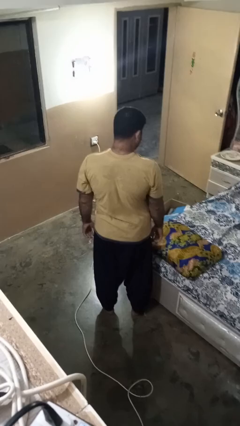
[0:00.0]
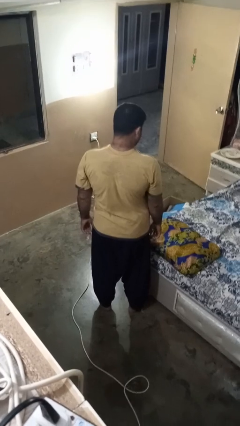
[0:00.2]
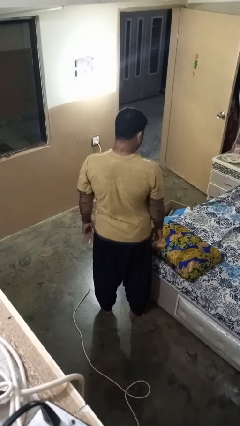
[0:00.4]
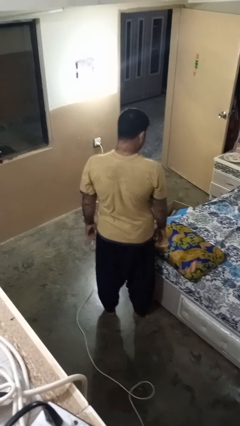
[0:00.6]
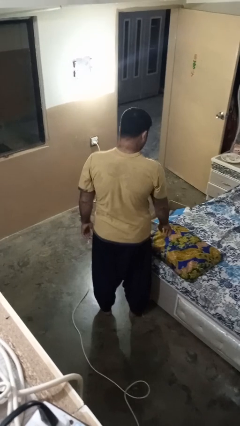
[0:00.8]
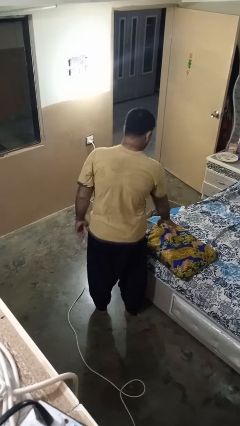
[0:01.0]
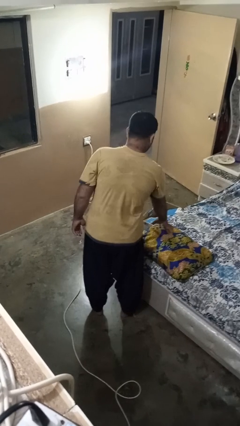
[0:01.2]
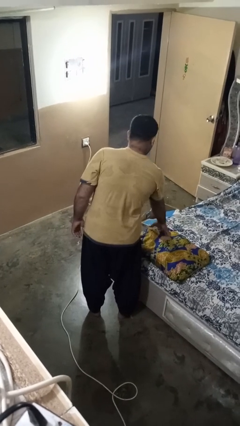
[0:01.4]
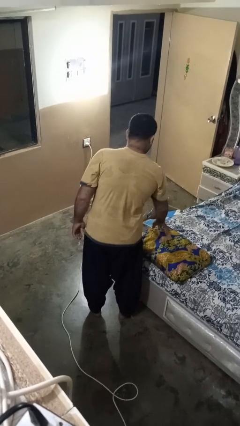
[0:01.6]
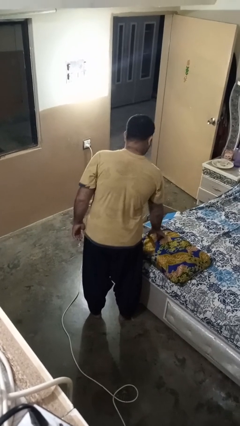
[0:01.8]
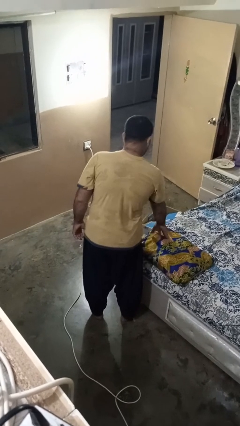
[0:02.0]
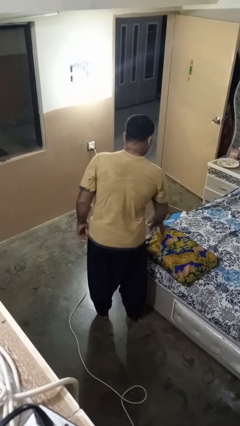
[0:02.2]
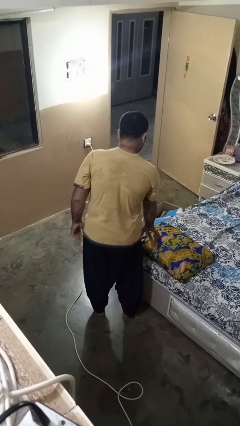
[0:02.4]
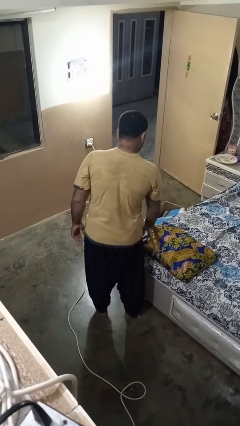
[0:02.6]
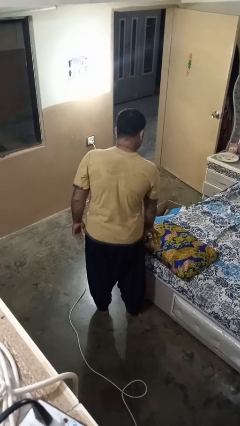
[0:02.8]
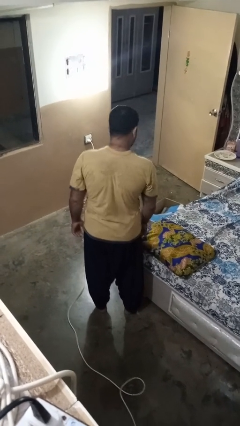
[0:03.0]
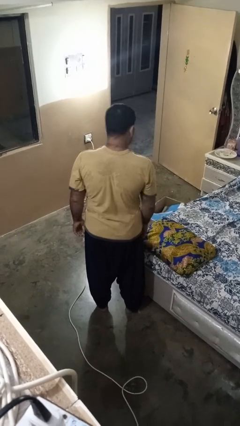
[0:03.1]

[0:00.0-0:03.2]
person taps object with finger

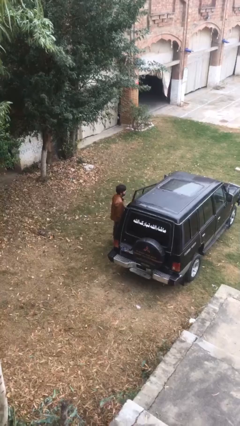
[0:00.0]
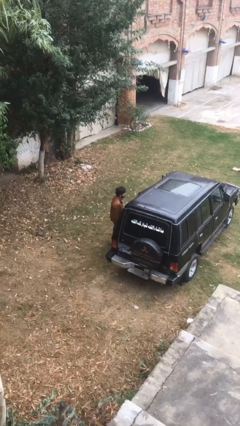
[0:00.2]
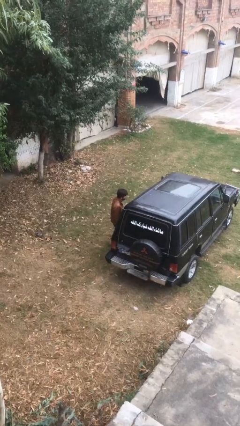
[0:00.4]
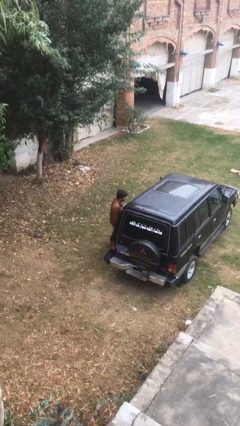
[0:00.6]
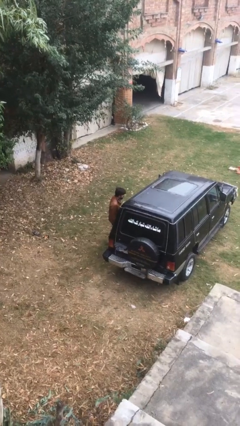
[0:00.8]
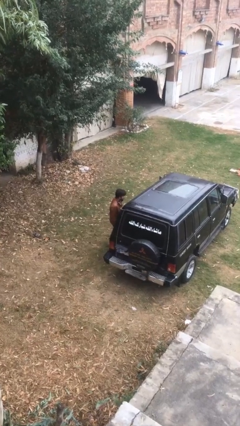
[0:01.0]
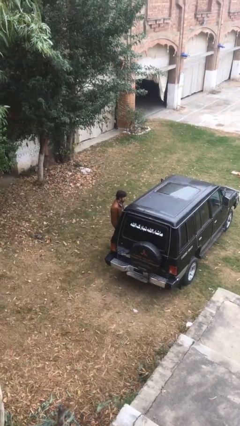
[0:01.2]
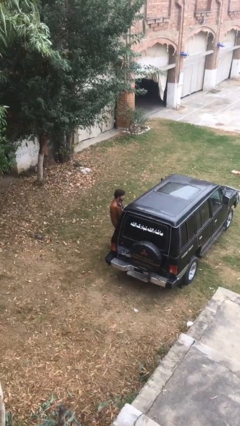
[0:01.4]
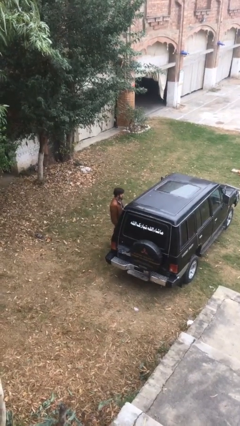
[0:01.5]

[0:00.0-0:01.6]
person closes car door

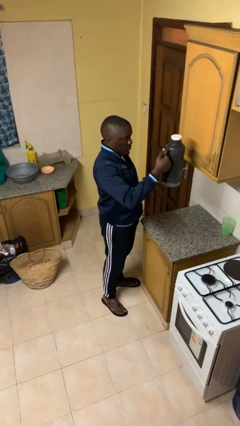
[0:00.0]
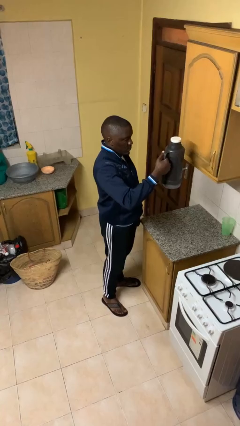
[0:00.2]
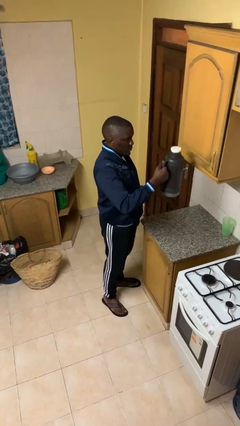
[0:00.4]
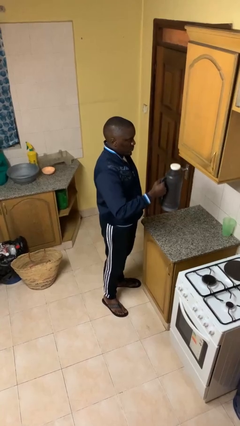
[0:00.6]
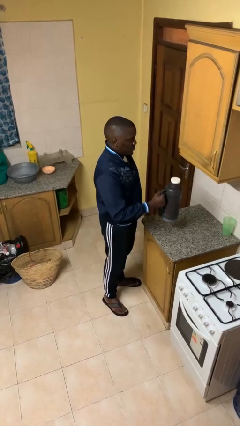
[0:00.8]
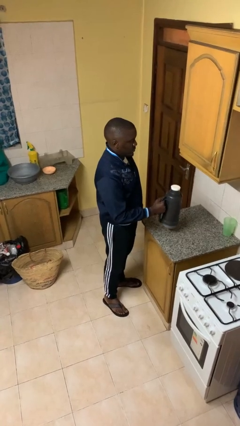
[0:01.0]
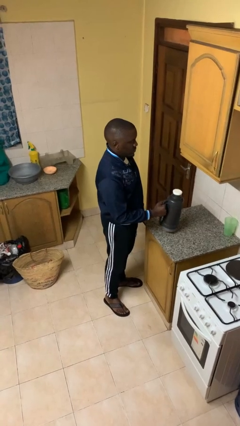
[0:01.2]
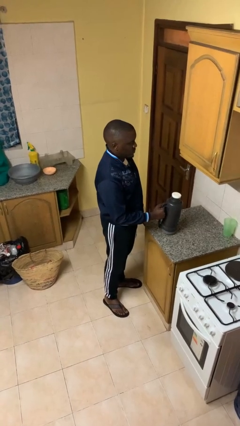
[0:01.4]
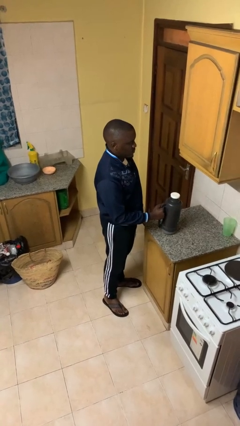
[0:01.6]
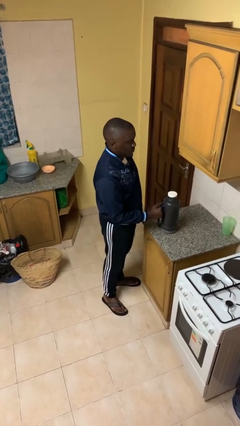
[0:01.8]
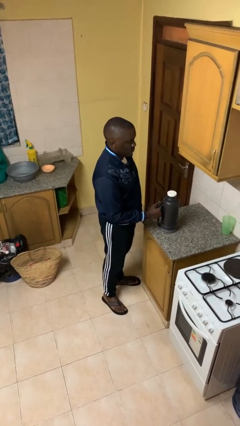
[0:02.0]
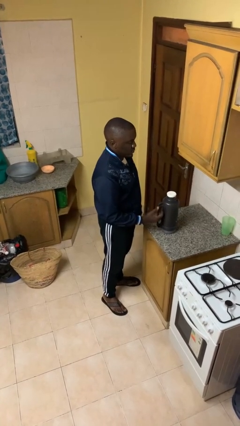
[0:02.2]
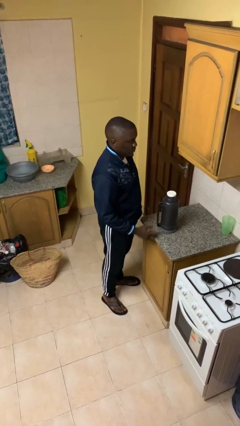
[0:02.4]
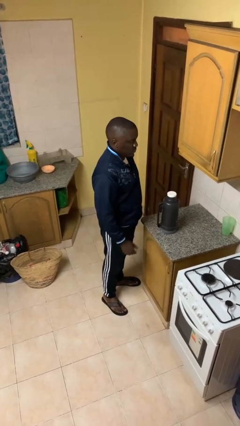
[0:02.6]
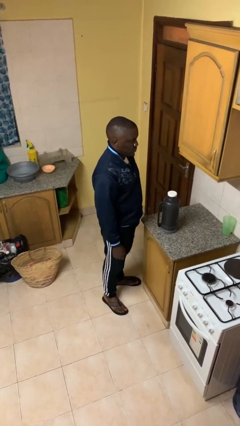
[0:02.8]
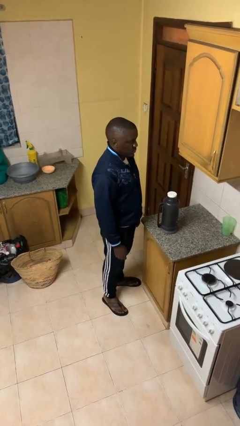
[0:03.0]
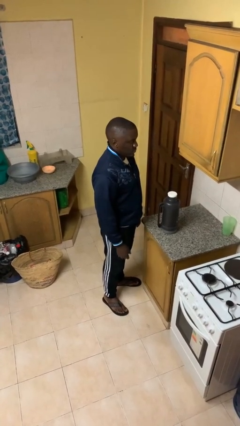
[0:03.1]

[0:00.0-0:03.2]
person puts down object on countertop

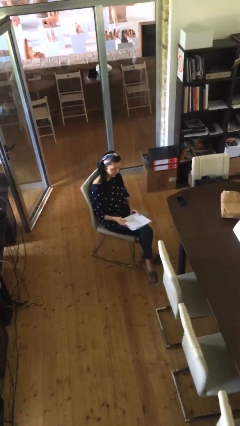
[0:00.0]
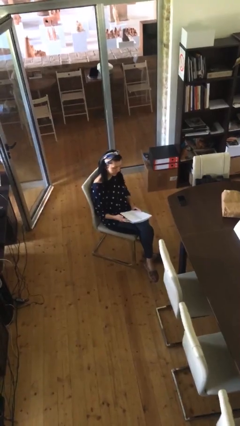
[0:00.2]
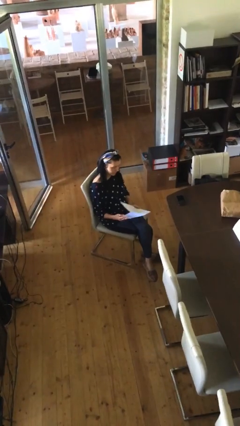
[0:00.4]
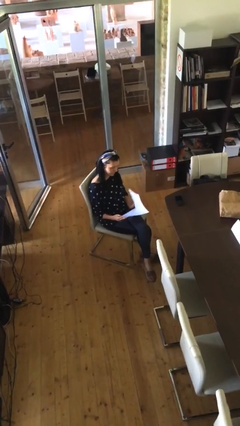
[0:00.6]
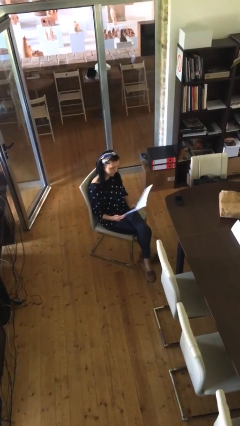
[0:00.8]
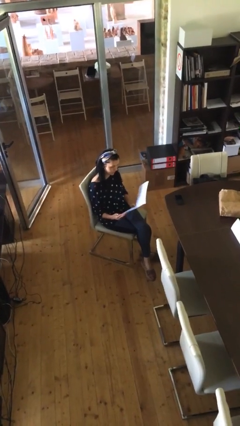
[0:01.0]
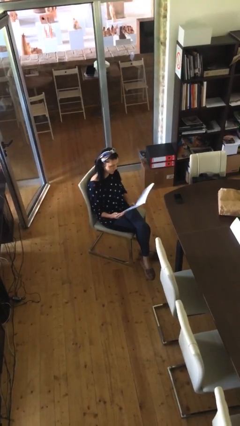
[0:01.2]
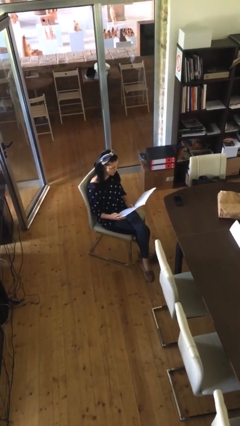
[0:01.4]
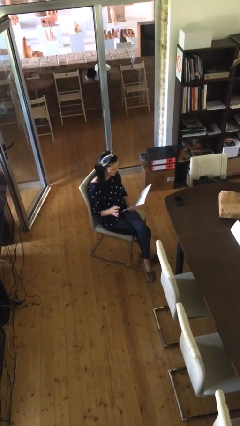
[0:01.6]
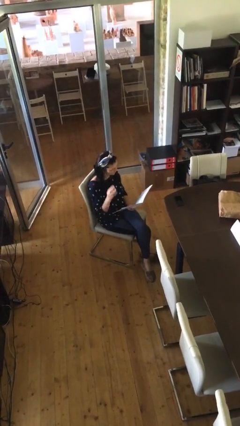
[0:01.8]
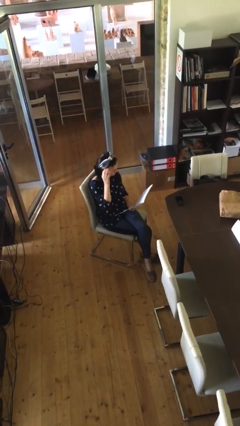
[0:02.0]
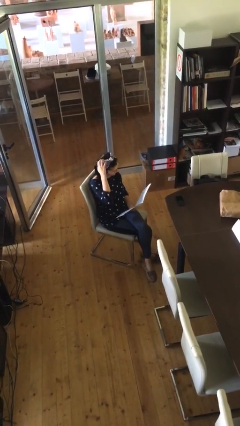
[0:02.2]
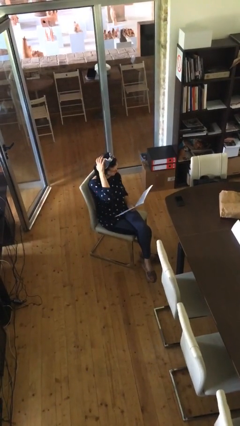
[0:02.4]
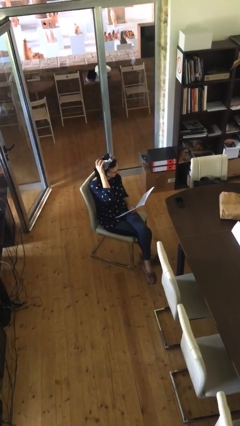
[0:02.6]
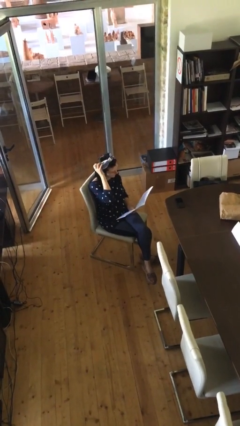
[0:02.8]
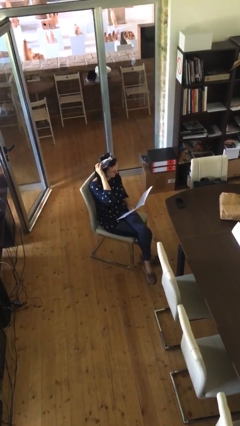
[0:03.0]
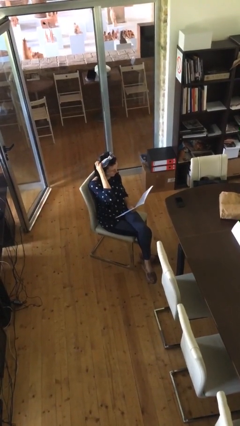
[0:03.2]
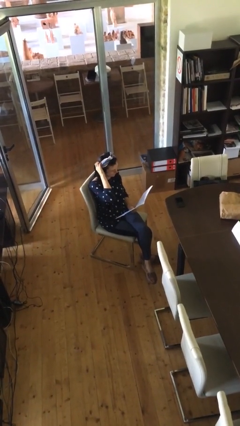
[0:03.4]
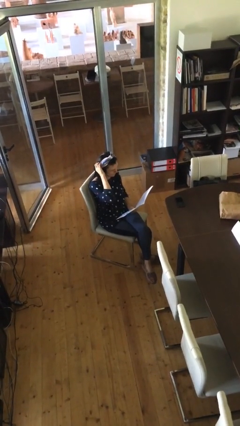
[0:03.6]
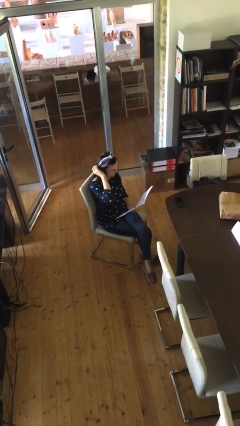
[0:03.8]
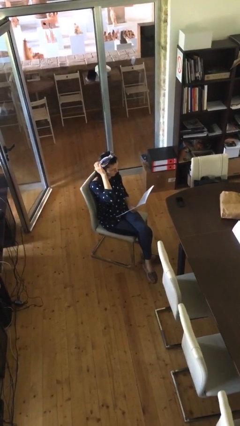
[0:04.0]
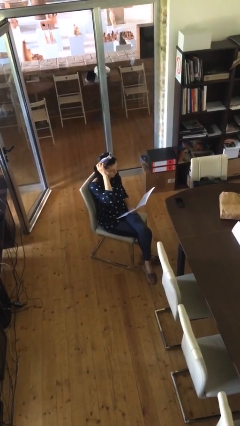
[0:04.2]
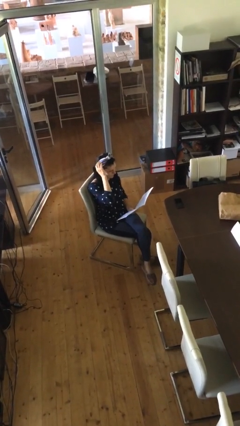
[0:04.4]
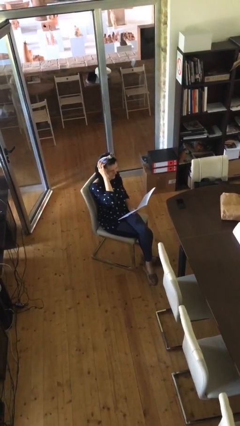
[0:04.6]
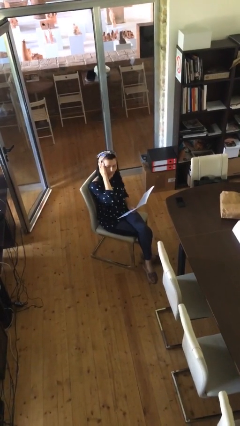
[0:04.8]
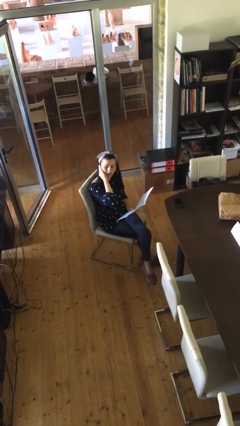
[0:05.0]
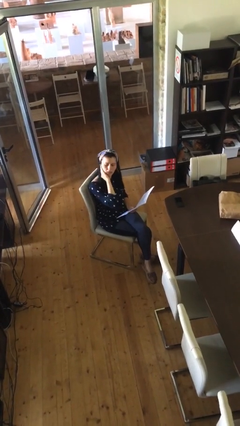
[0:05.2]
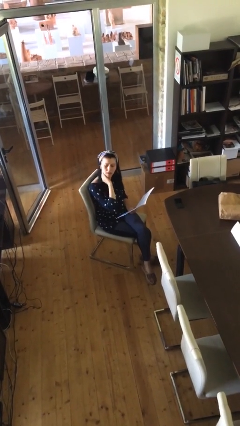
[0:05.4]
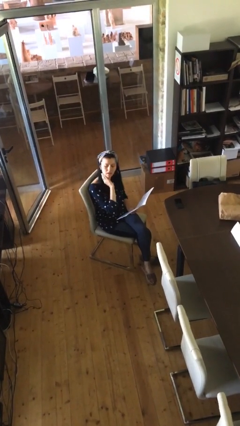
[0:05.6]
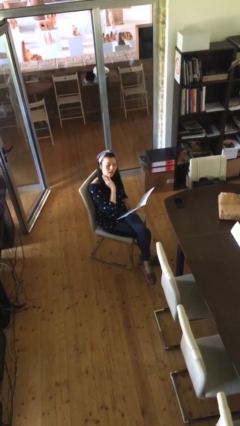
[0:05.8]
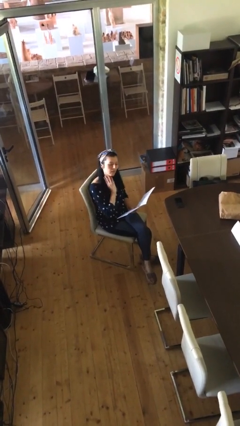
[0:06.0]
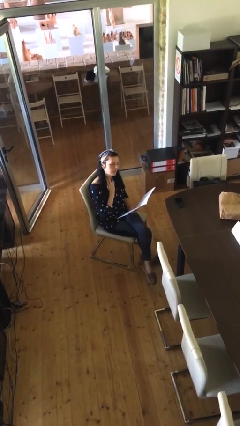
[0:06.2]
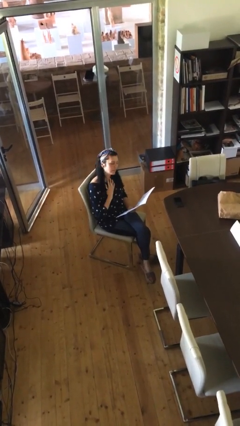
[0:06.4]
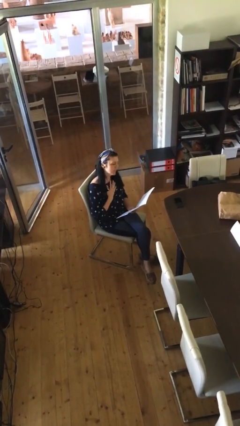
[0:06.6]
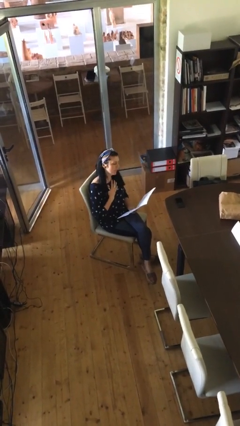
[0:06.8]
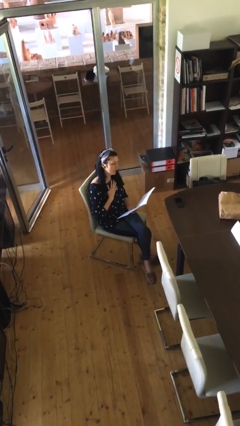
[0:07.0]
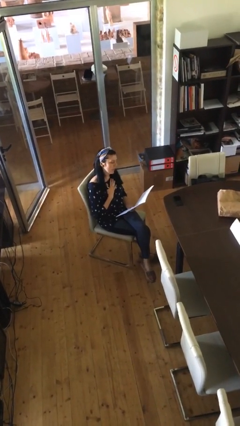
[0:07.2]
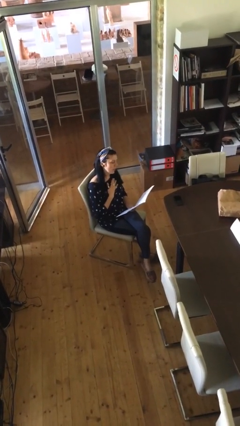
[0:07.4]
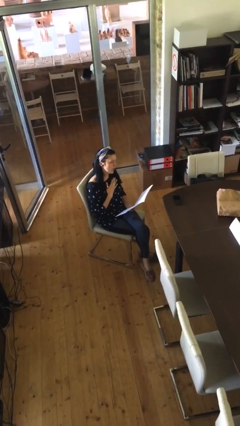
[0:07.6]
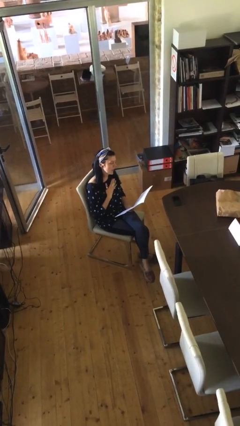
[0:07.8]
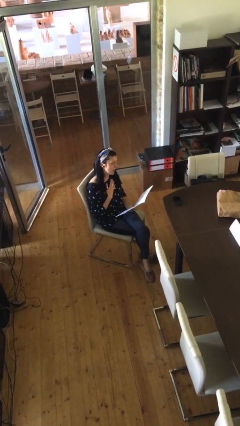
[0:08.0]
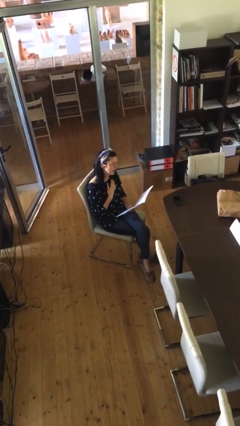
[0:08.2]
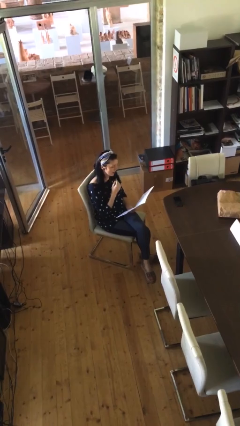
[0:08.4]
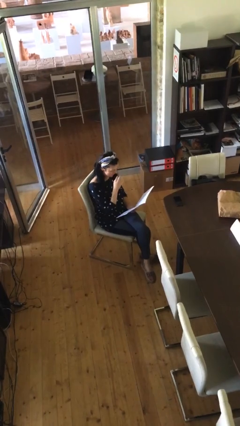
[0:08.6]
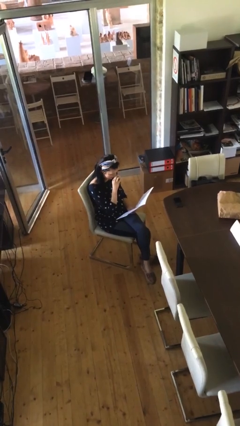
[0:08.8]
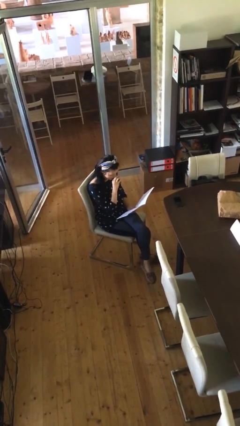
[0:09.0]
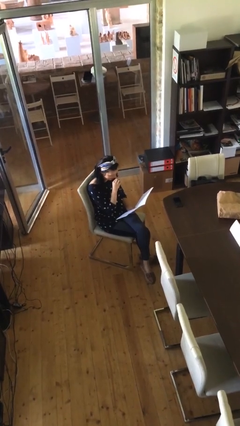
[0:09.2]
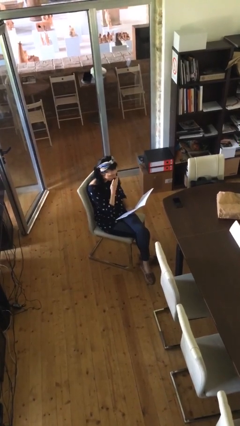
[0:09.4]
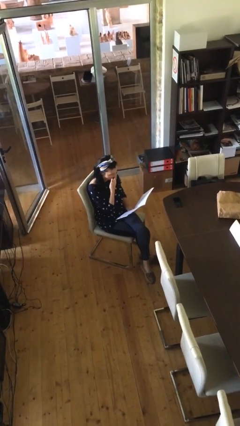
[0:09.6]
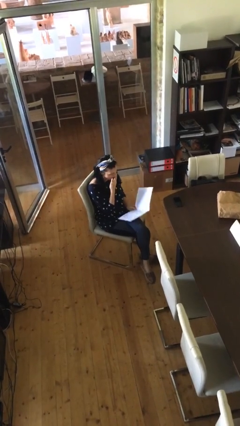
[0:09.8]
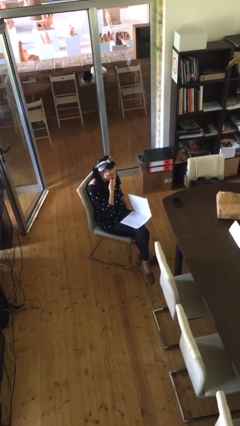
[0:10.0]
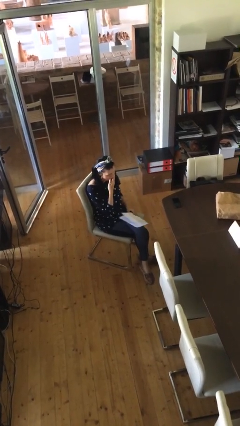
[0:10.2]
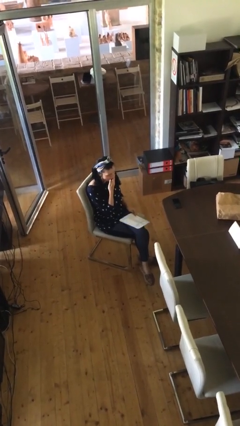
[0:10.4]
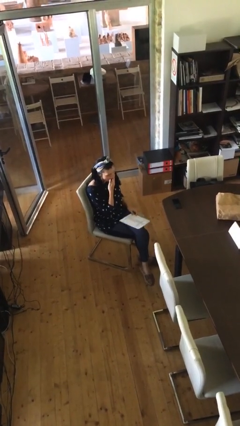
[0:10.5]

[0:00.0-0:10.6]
person reads document
